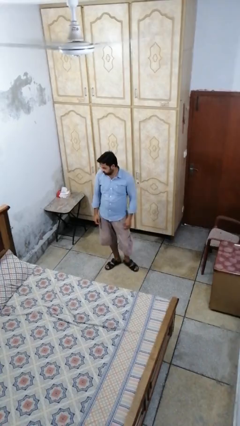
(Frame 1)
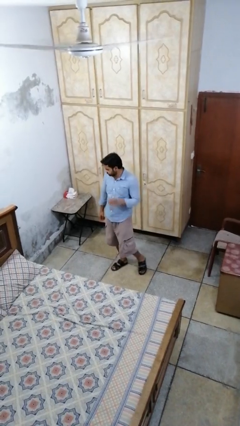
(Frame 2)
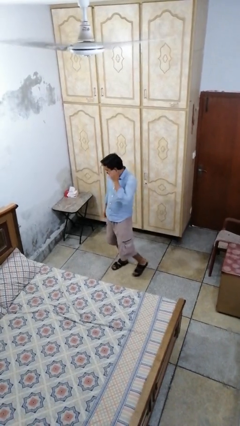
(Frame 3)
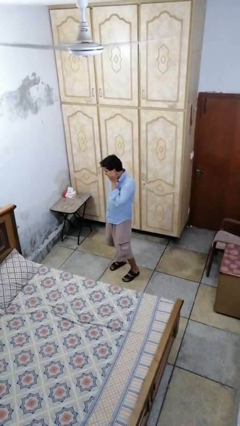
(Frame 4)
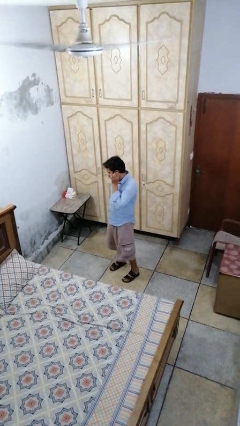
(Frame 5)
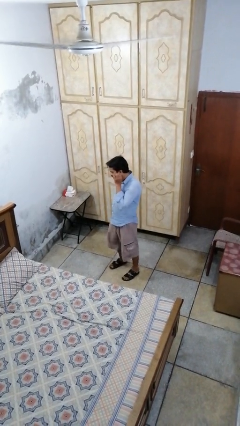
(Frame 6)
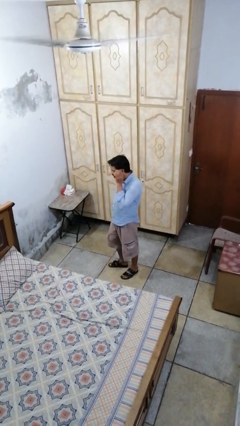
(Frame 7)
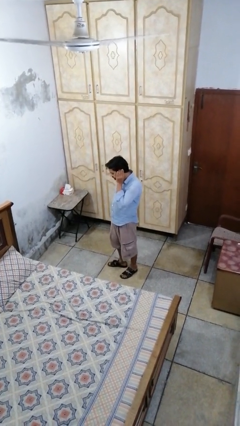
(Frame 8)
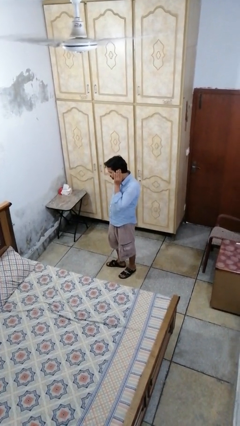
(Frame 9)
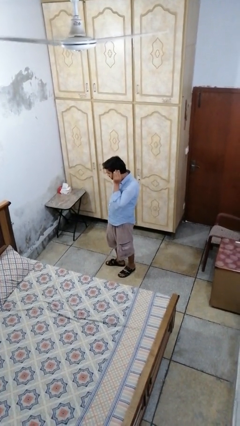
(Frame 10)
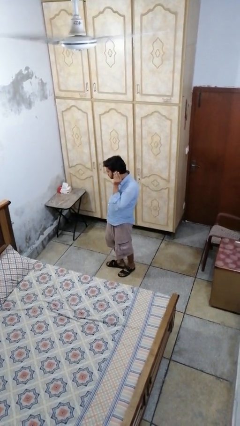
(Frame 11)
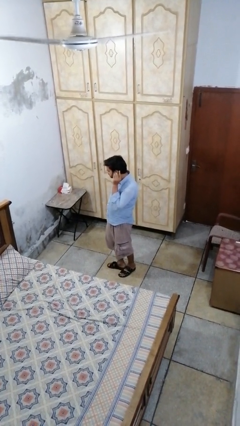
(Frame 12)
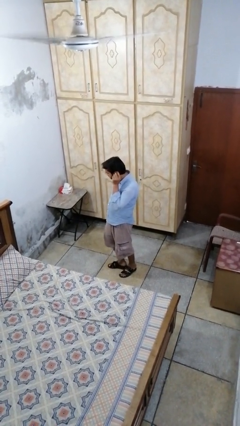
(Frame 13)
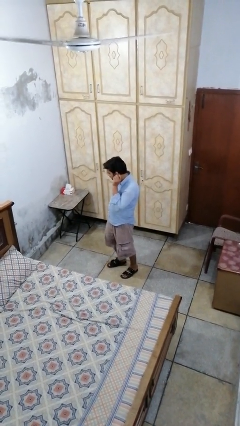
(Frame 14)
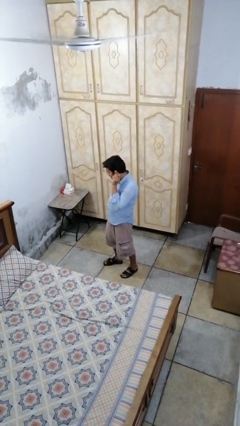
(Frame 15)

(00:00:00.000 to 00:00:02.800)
person touches earlobe

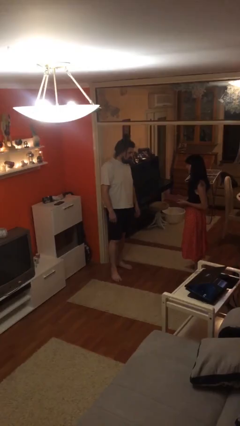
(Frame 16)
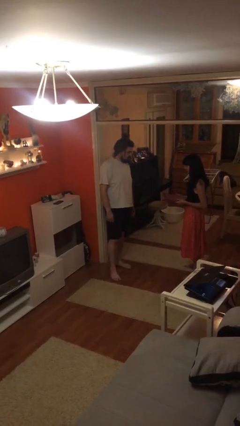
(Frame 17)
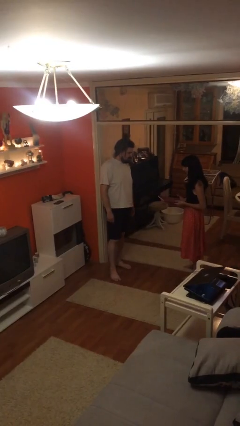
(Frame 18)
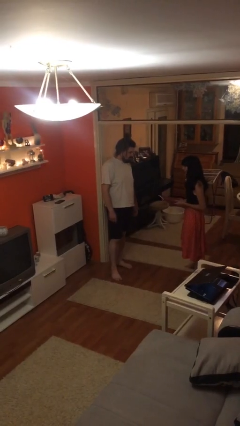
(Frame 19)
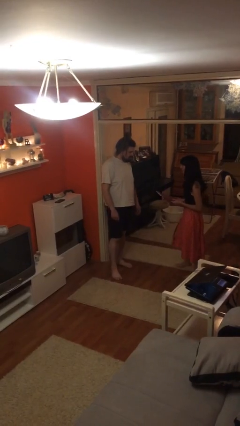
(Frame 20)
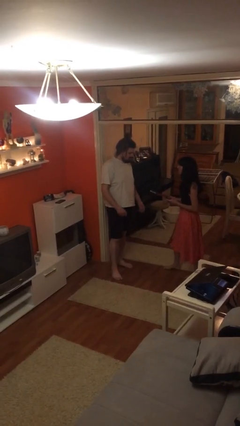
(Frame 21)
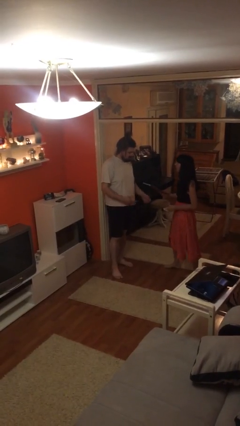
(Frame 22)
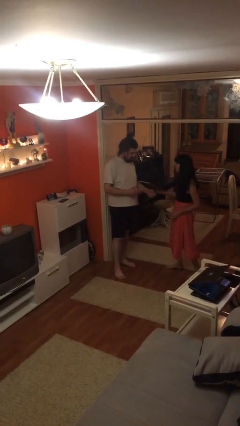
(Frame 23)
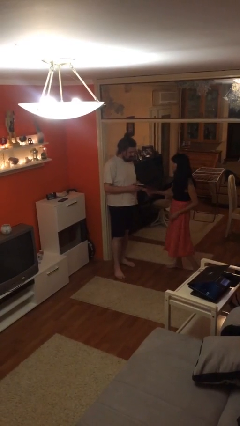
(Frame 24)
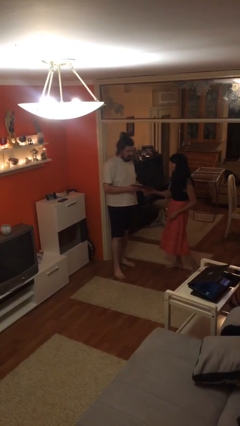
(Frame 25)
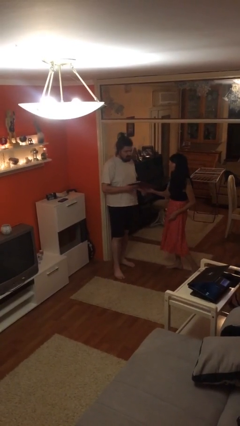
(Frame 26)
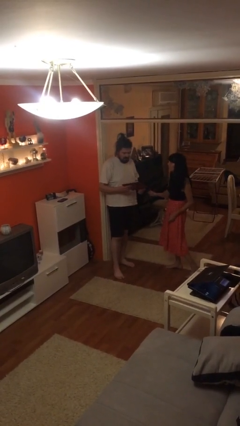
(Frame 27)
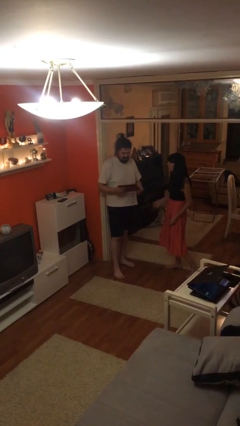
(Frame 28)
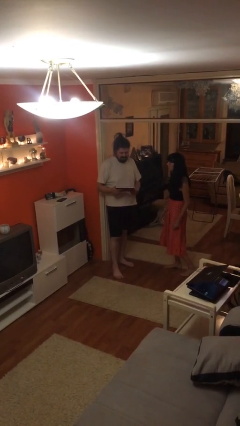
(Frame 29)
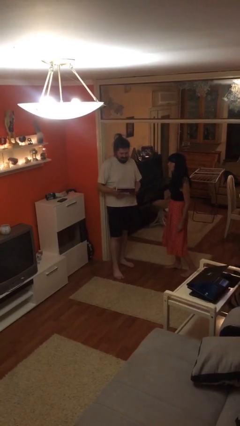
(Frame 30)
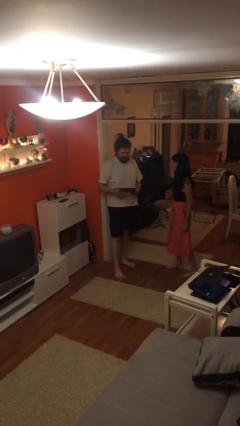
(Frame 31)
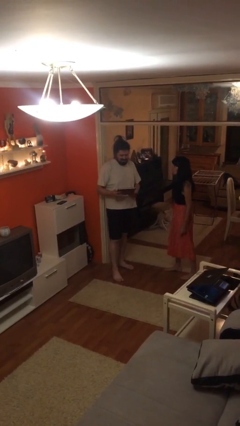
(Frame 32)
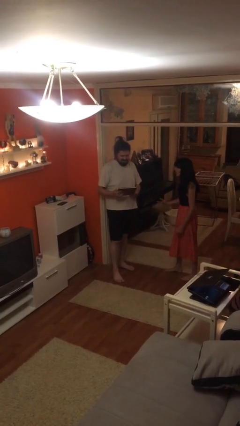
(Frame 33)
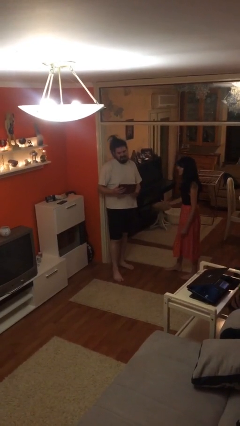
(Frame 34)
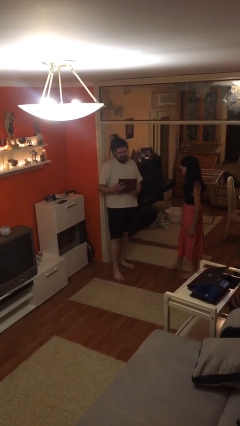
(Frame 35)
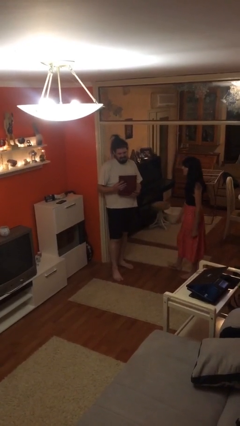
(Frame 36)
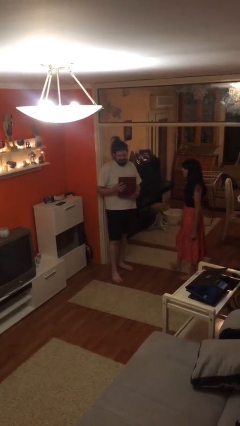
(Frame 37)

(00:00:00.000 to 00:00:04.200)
person transfers object to person

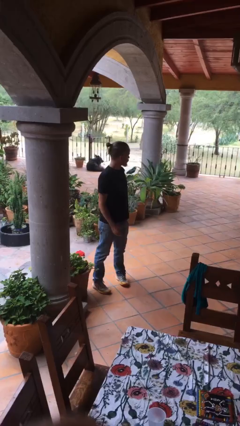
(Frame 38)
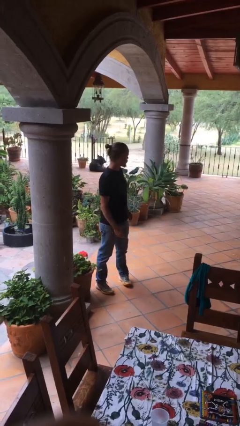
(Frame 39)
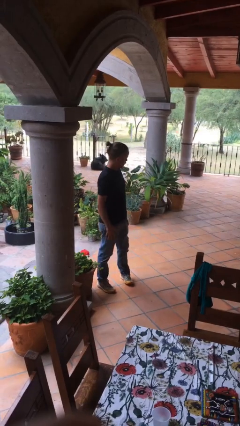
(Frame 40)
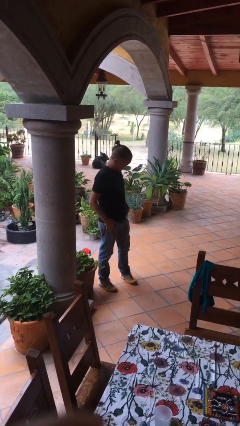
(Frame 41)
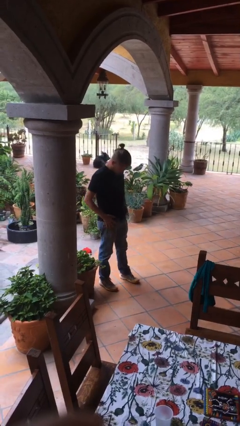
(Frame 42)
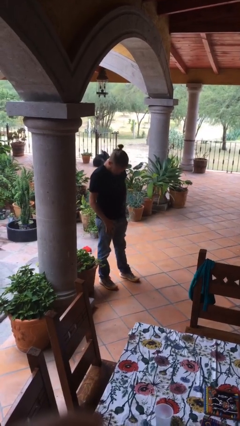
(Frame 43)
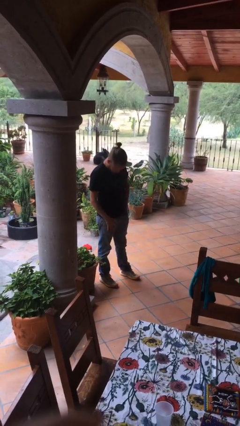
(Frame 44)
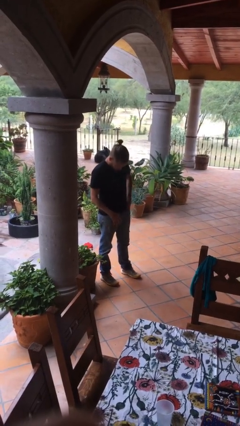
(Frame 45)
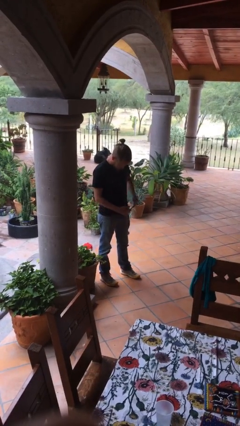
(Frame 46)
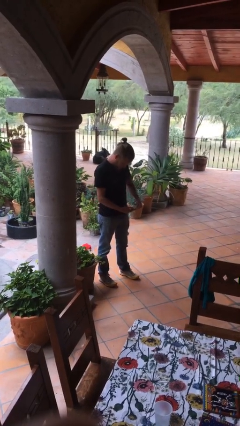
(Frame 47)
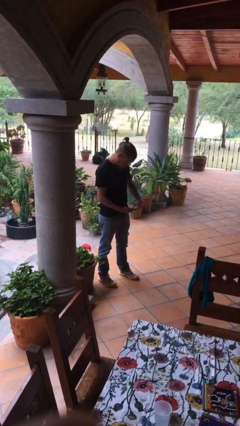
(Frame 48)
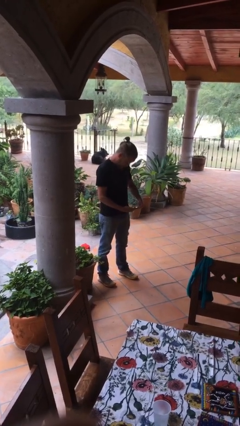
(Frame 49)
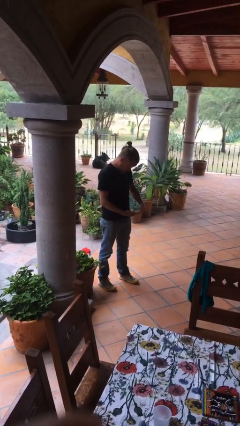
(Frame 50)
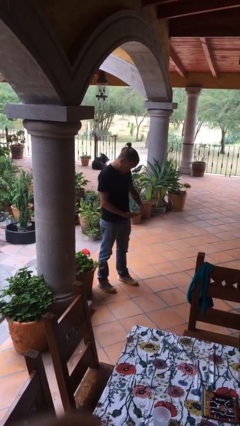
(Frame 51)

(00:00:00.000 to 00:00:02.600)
person takes phone from pocket

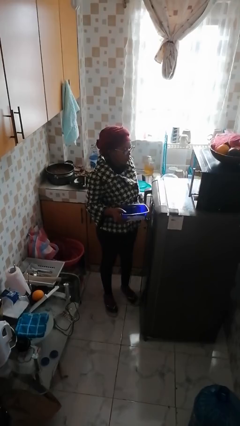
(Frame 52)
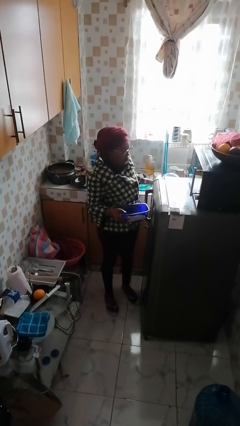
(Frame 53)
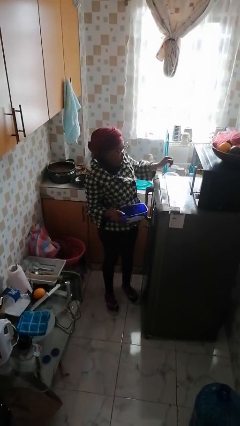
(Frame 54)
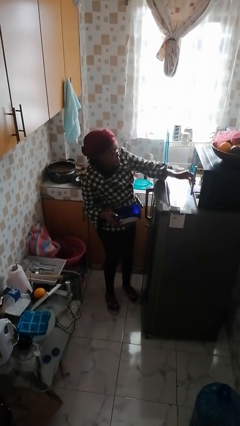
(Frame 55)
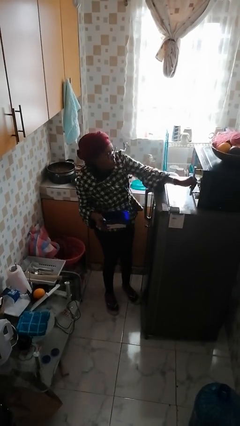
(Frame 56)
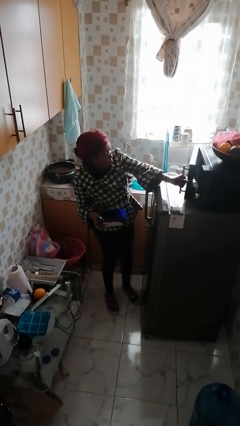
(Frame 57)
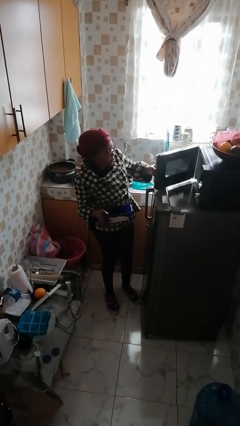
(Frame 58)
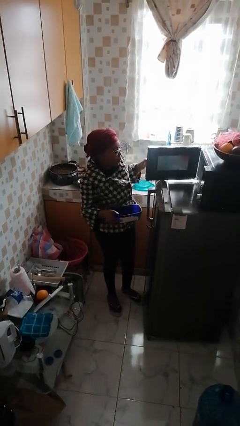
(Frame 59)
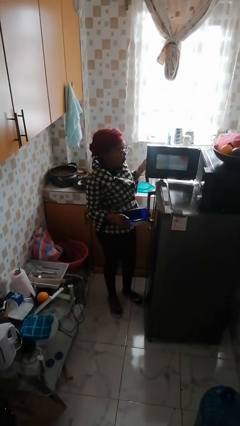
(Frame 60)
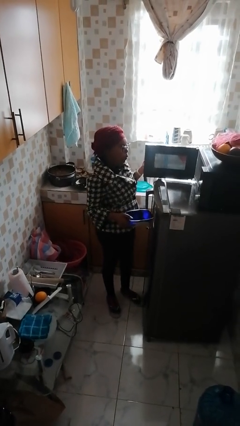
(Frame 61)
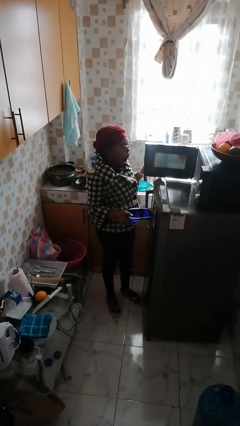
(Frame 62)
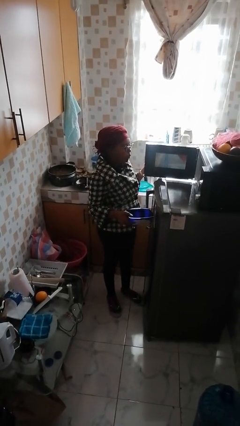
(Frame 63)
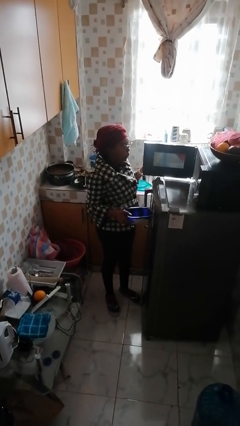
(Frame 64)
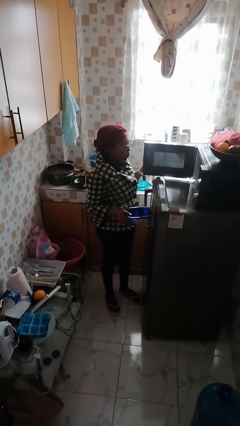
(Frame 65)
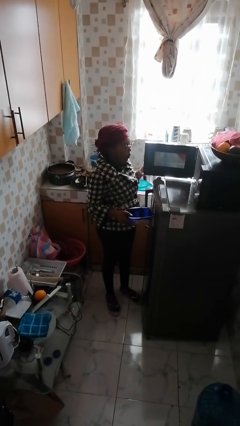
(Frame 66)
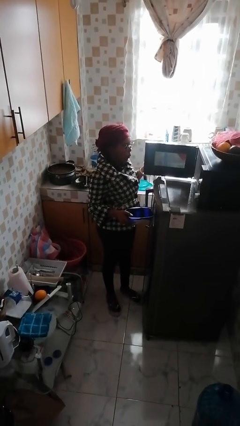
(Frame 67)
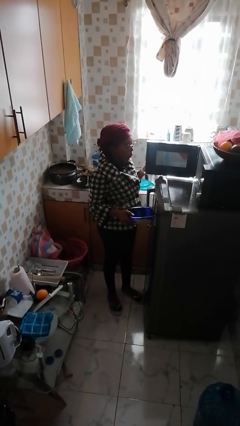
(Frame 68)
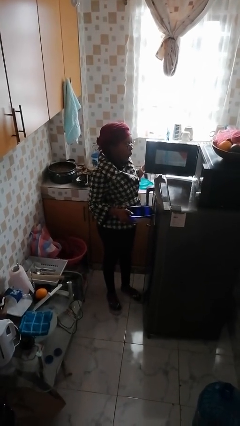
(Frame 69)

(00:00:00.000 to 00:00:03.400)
person opens microwave

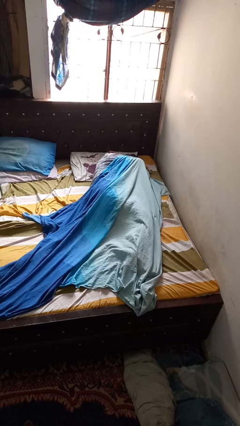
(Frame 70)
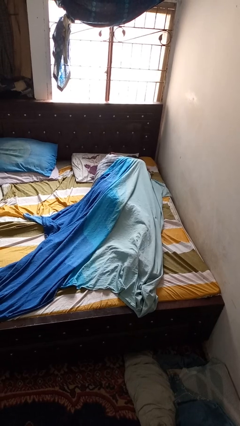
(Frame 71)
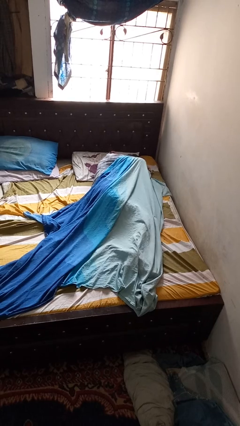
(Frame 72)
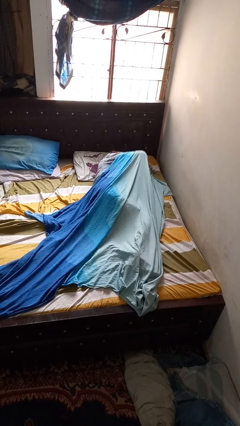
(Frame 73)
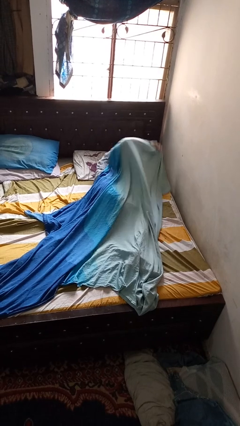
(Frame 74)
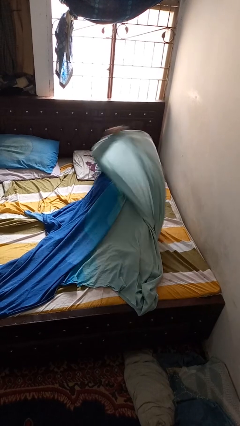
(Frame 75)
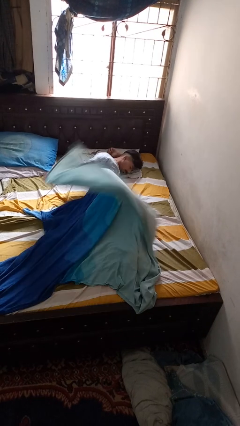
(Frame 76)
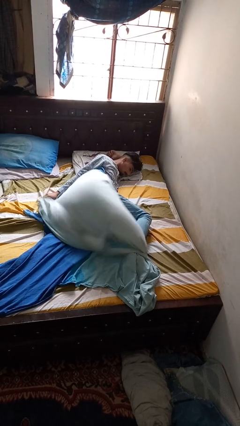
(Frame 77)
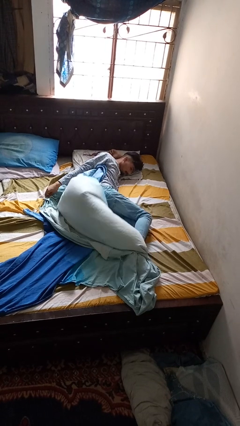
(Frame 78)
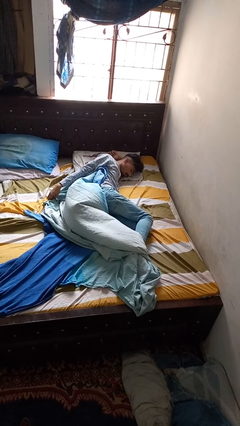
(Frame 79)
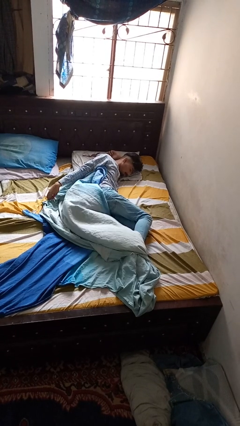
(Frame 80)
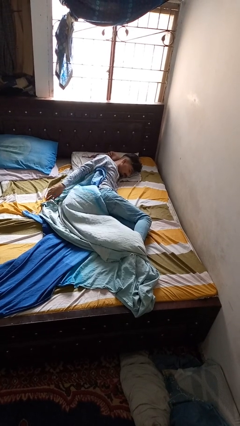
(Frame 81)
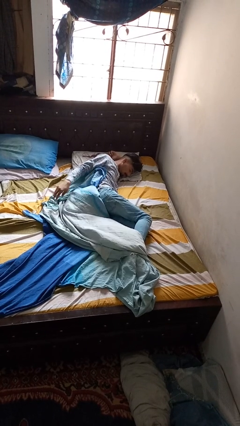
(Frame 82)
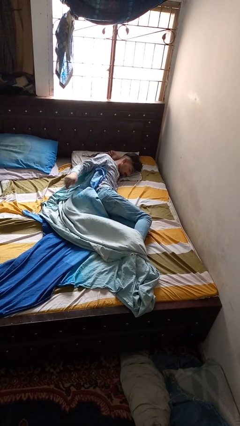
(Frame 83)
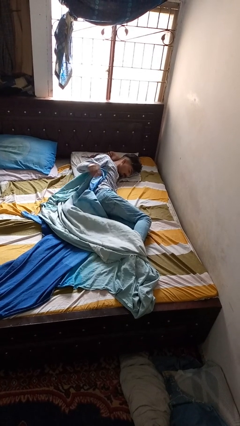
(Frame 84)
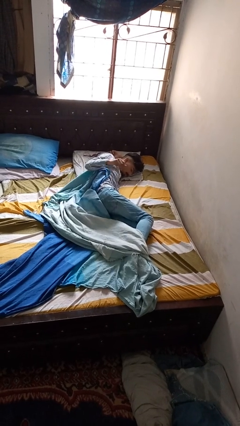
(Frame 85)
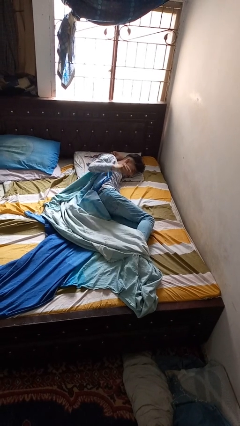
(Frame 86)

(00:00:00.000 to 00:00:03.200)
person uncovers with blanket

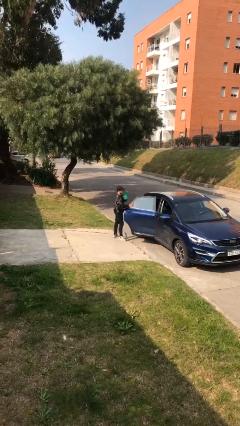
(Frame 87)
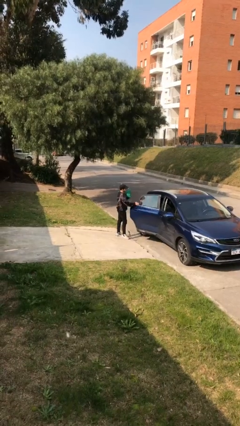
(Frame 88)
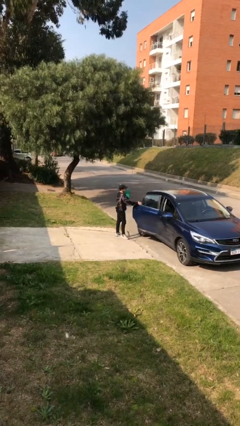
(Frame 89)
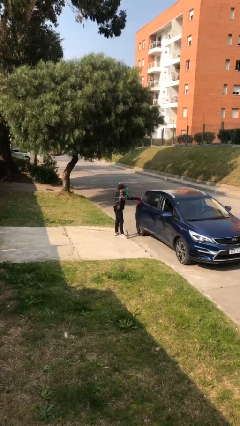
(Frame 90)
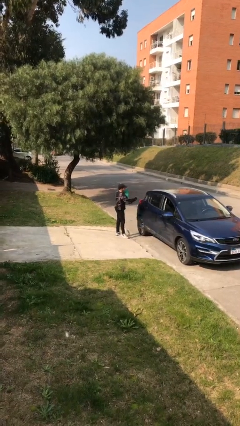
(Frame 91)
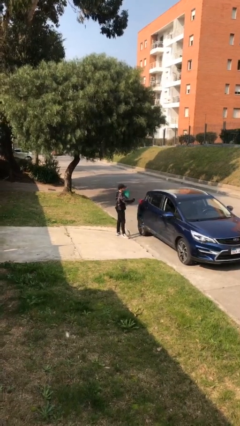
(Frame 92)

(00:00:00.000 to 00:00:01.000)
person closes car door
